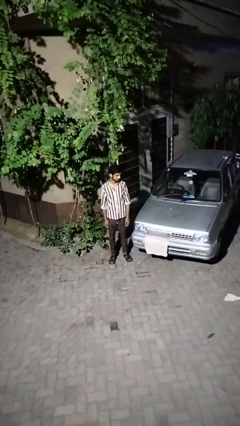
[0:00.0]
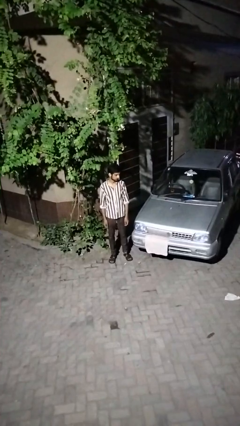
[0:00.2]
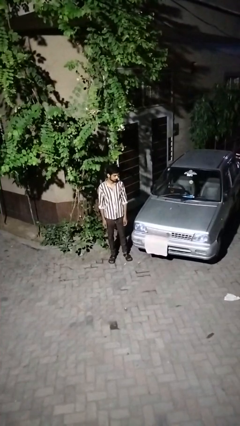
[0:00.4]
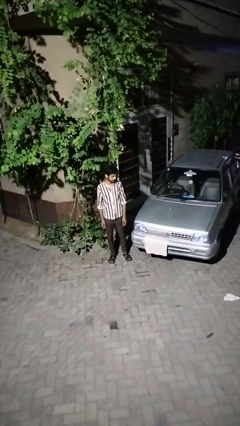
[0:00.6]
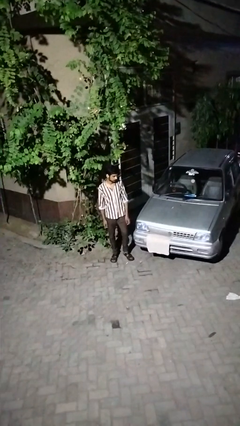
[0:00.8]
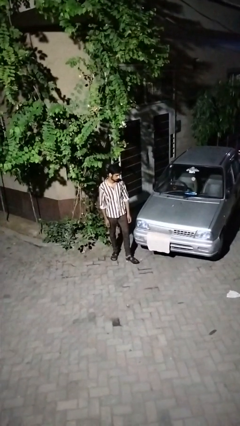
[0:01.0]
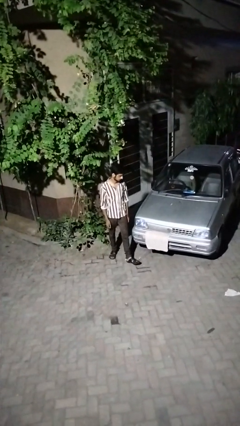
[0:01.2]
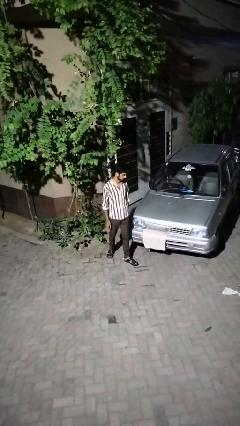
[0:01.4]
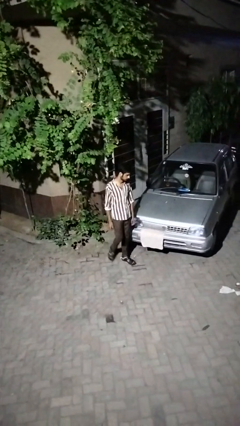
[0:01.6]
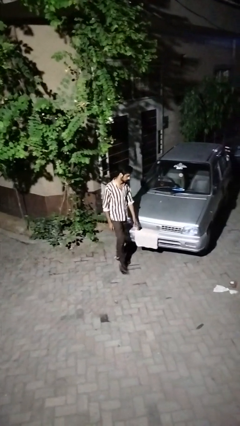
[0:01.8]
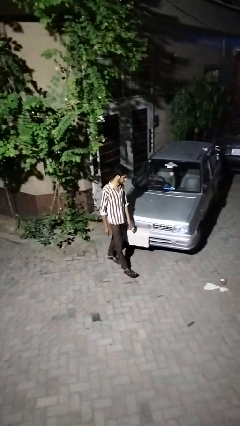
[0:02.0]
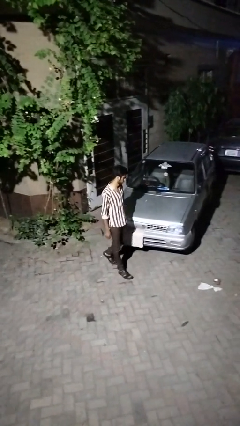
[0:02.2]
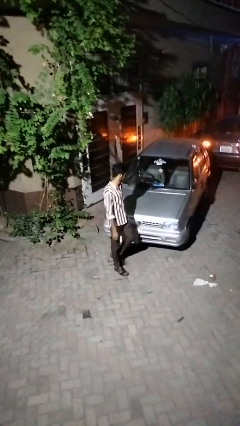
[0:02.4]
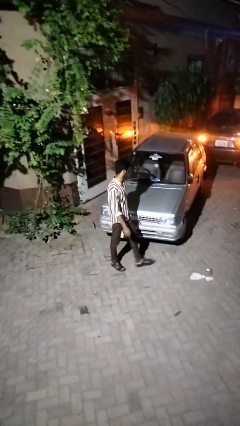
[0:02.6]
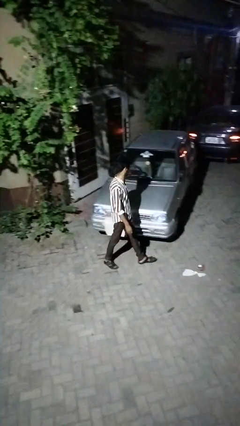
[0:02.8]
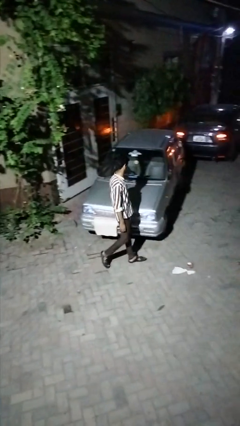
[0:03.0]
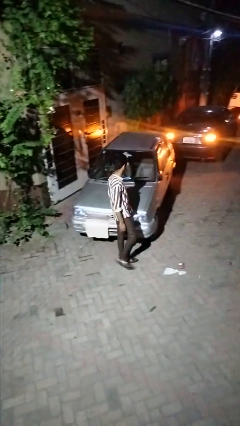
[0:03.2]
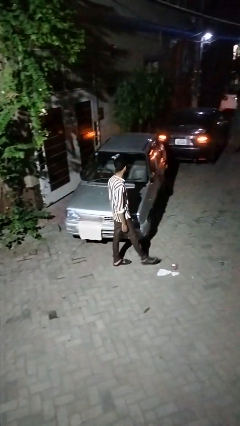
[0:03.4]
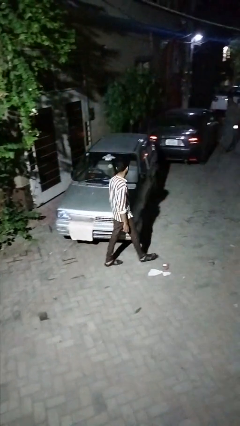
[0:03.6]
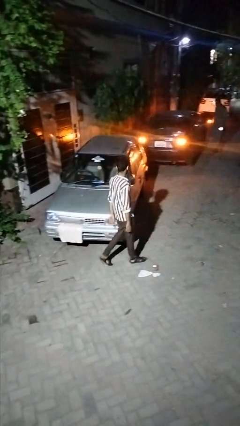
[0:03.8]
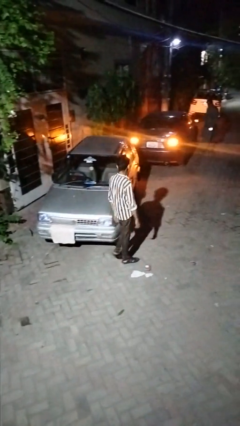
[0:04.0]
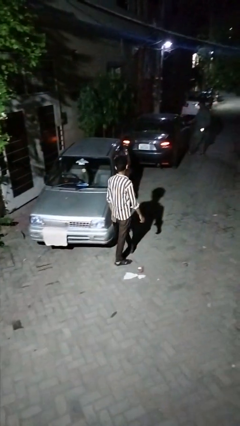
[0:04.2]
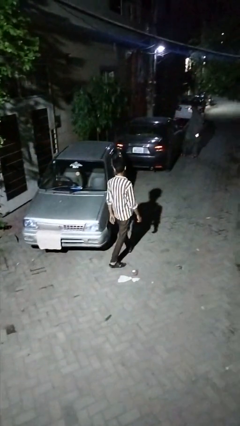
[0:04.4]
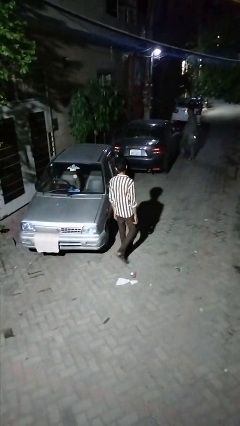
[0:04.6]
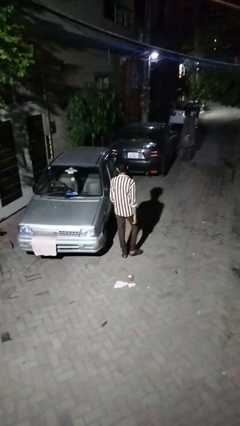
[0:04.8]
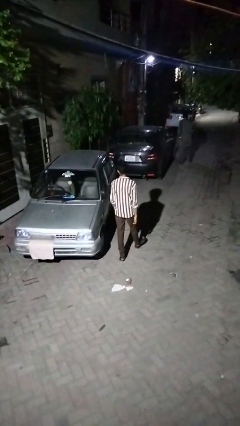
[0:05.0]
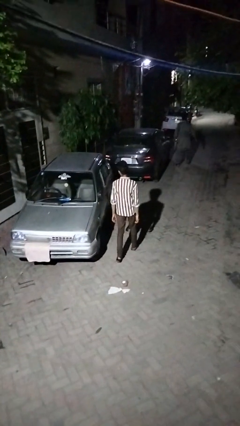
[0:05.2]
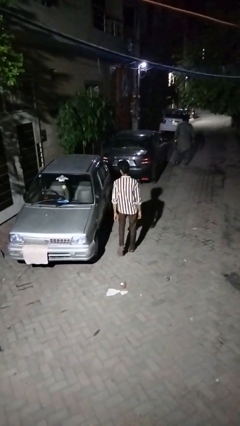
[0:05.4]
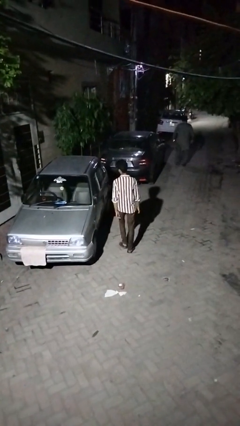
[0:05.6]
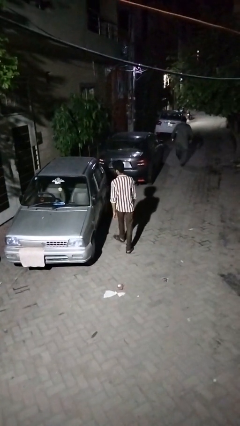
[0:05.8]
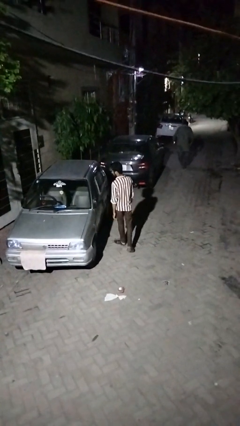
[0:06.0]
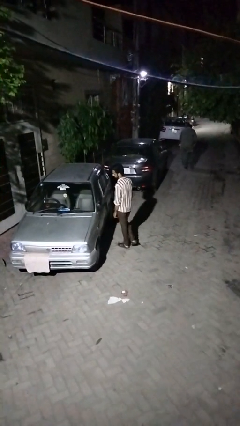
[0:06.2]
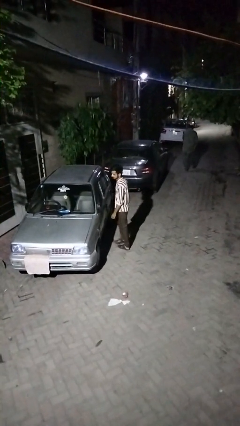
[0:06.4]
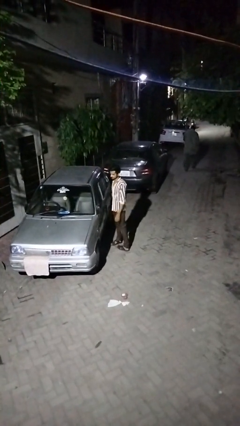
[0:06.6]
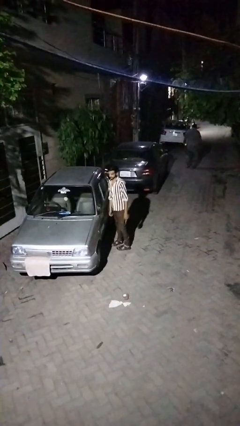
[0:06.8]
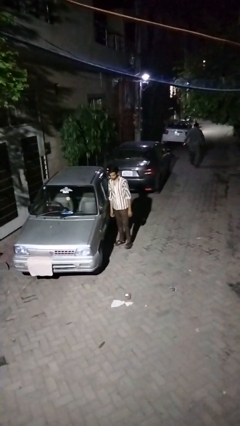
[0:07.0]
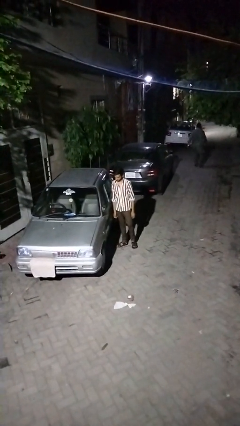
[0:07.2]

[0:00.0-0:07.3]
person walks around car

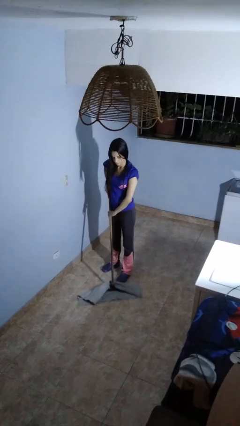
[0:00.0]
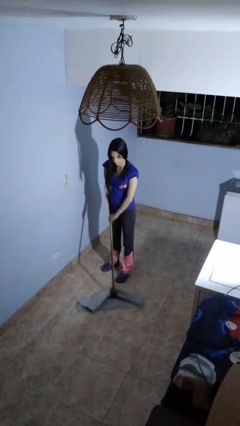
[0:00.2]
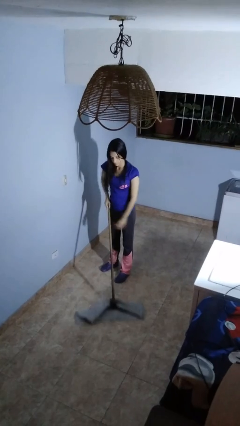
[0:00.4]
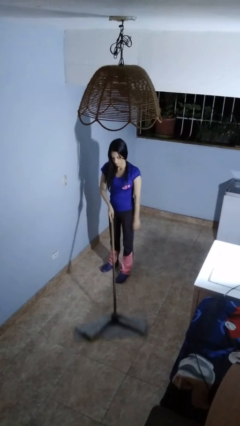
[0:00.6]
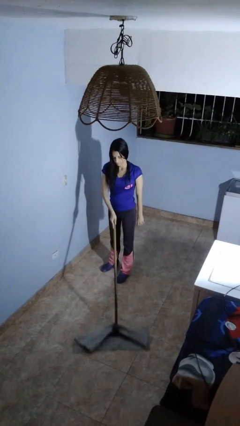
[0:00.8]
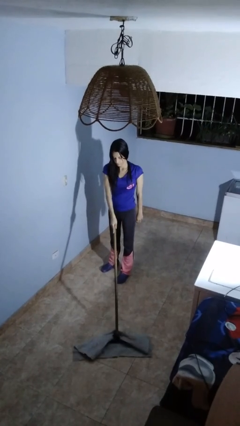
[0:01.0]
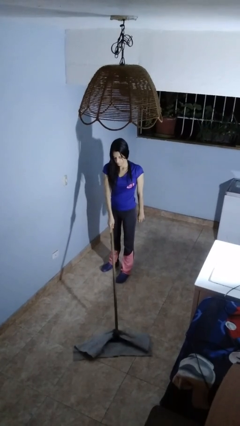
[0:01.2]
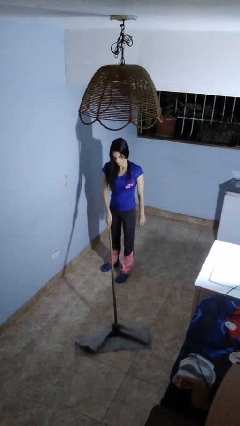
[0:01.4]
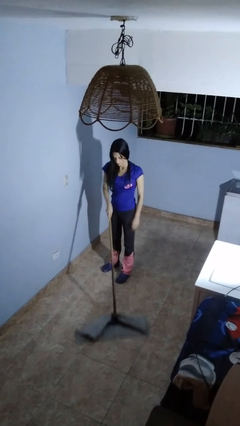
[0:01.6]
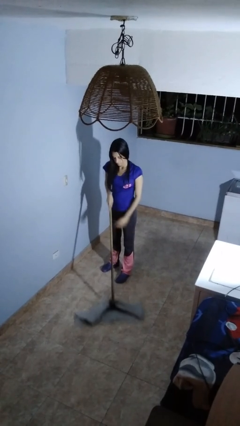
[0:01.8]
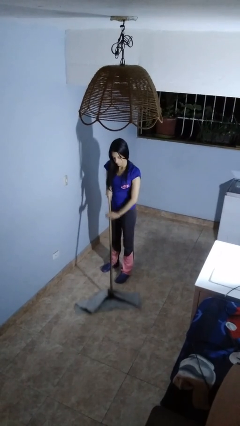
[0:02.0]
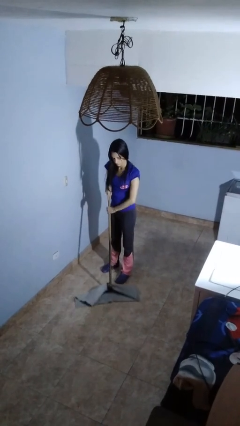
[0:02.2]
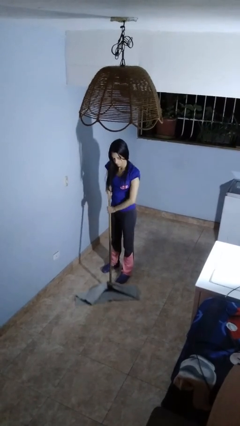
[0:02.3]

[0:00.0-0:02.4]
person mops

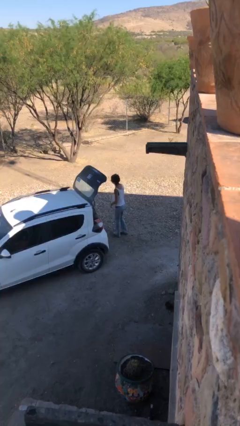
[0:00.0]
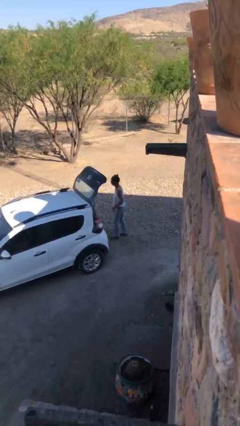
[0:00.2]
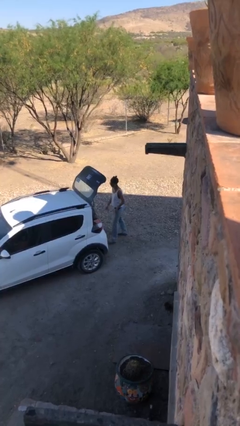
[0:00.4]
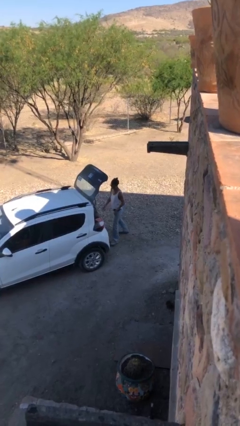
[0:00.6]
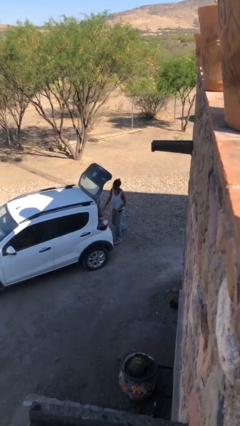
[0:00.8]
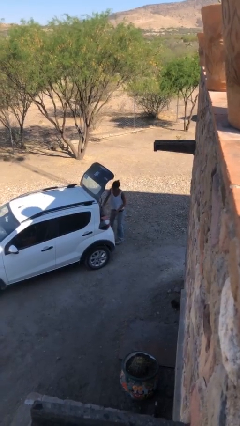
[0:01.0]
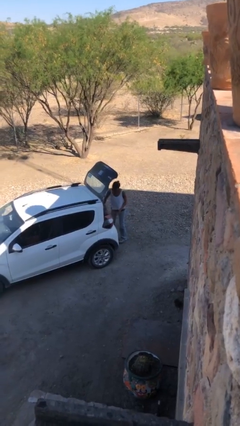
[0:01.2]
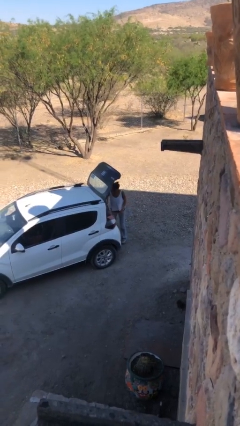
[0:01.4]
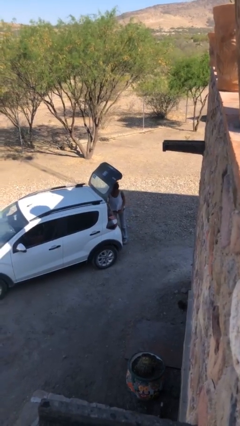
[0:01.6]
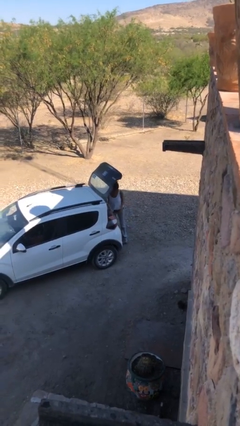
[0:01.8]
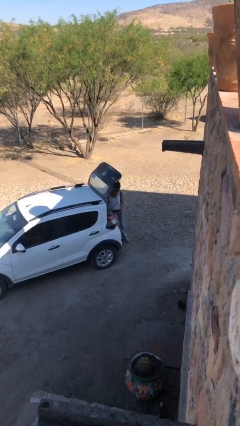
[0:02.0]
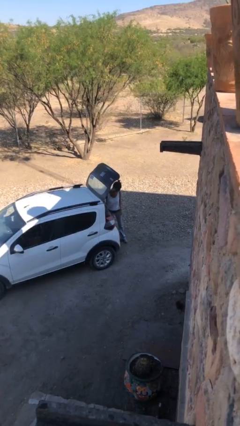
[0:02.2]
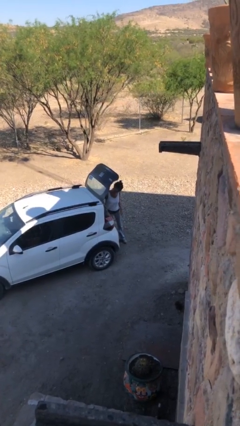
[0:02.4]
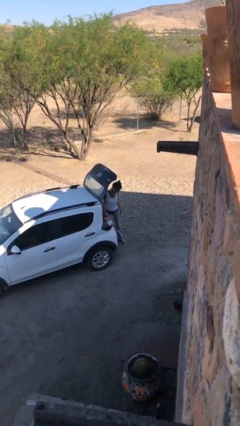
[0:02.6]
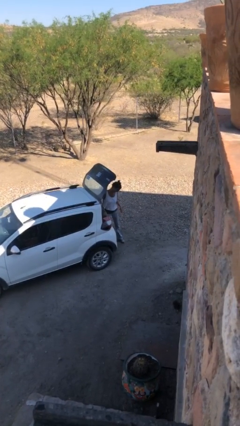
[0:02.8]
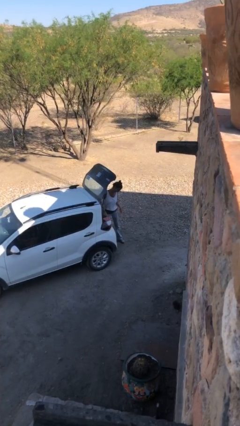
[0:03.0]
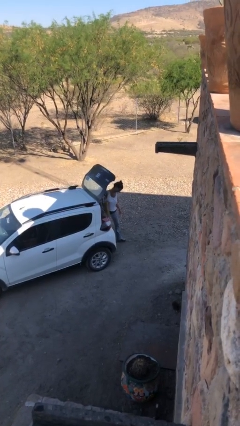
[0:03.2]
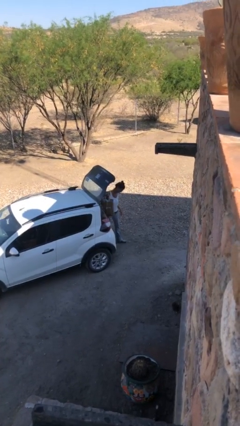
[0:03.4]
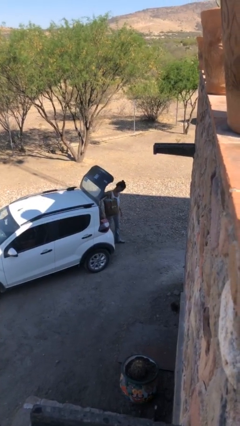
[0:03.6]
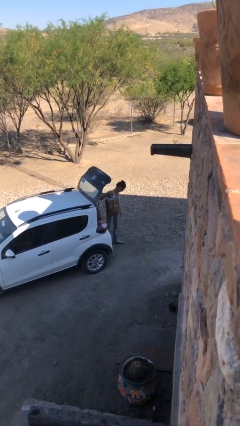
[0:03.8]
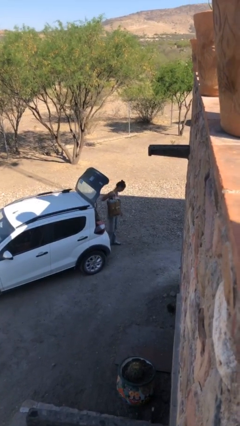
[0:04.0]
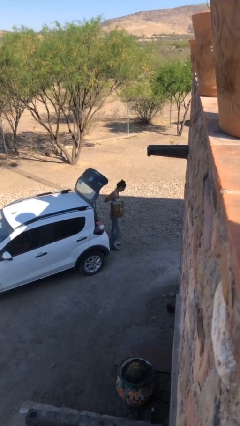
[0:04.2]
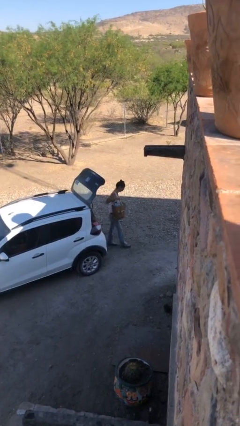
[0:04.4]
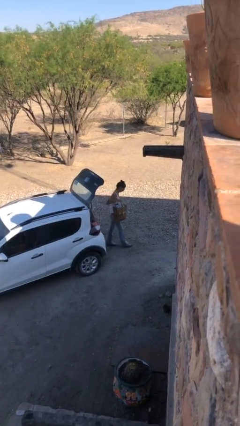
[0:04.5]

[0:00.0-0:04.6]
person unloads car

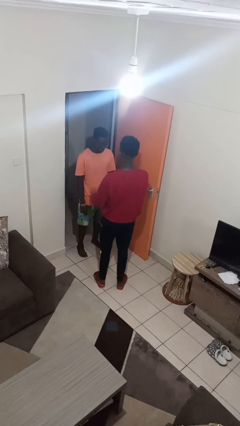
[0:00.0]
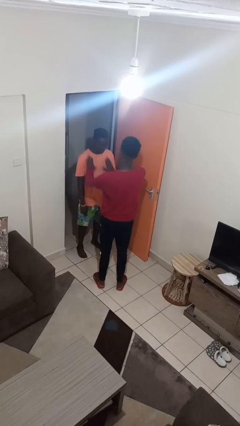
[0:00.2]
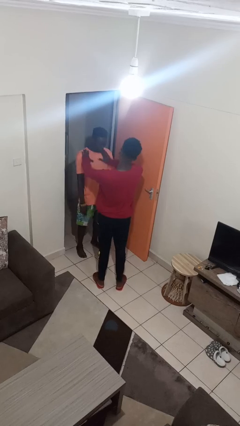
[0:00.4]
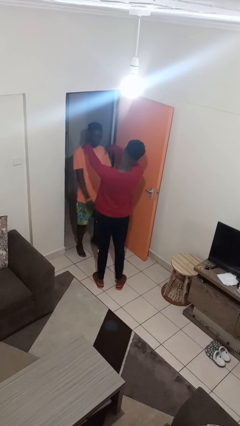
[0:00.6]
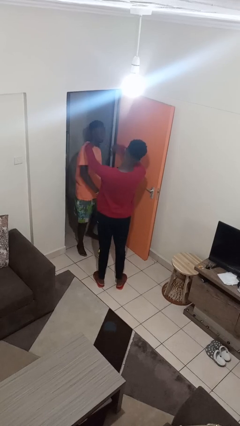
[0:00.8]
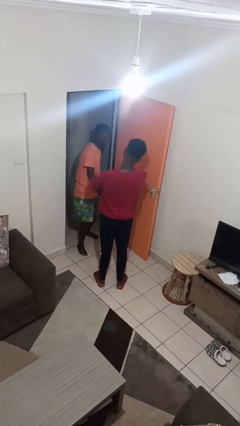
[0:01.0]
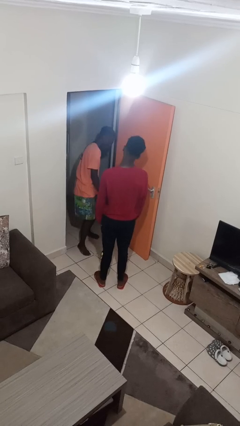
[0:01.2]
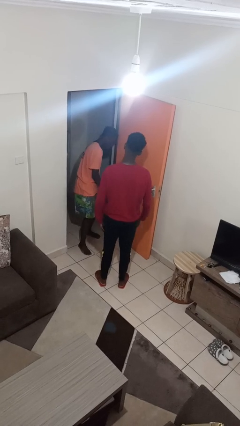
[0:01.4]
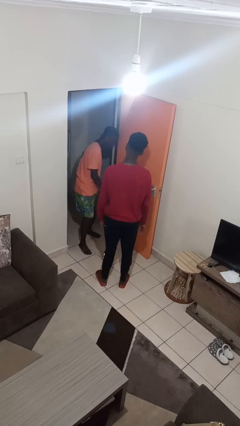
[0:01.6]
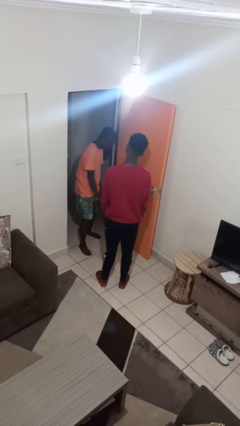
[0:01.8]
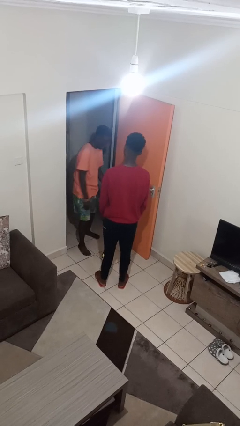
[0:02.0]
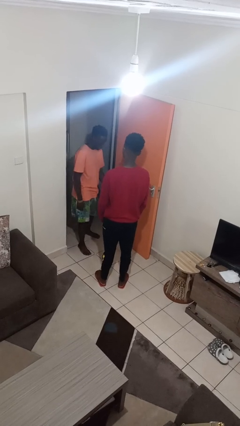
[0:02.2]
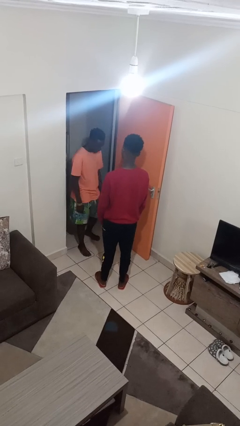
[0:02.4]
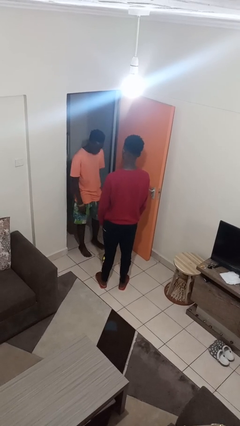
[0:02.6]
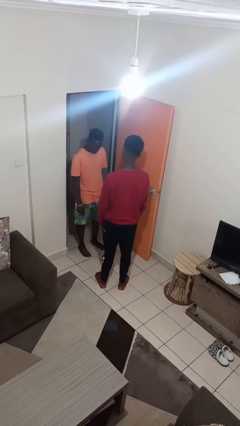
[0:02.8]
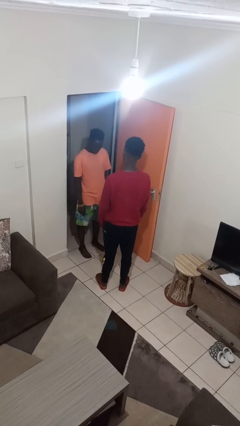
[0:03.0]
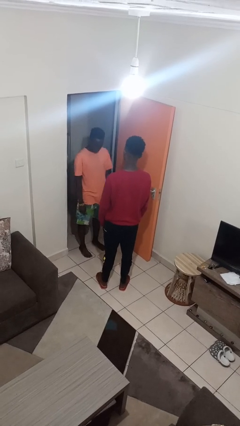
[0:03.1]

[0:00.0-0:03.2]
person shoves person

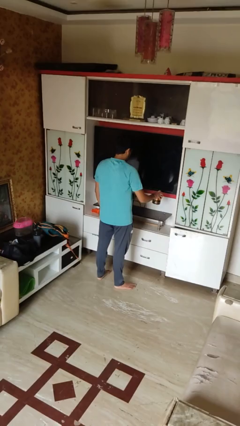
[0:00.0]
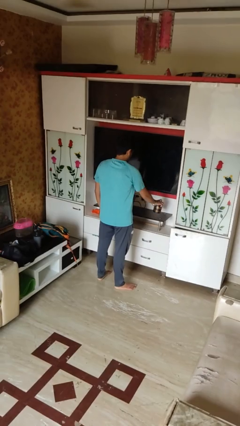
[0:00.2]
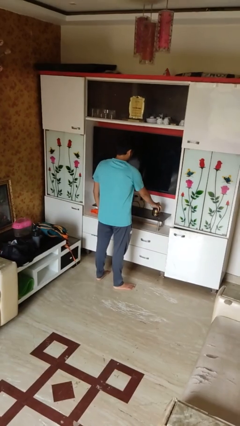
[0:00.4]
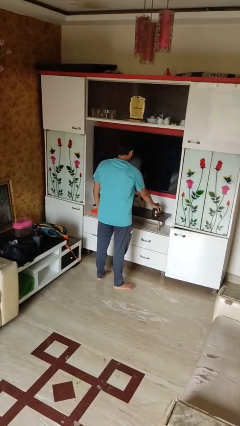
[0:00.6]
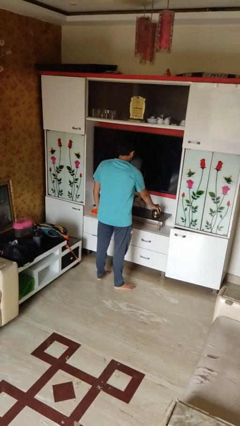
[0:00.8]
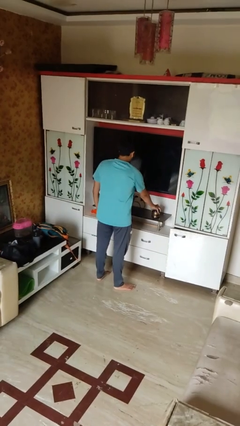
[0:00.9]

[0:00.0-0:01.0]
person puts down object on countertop
